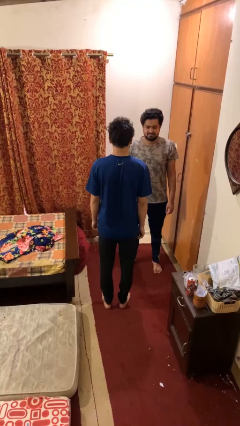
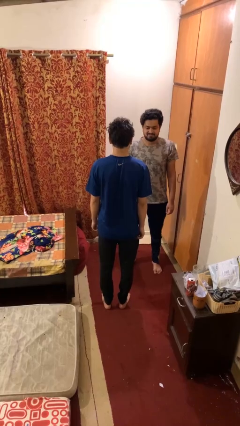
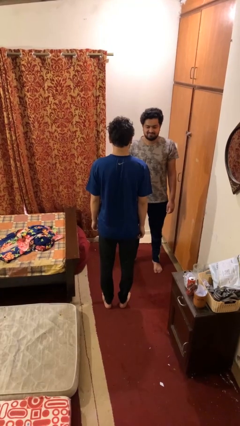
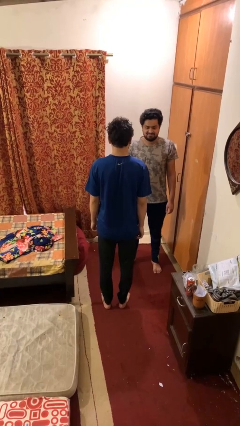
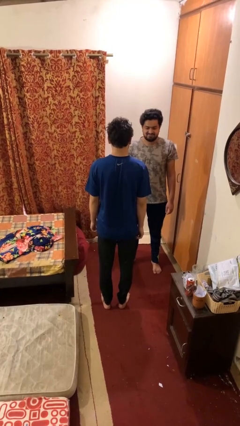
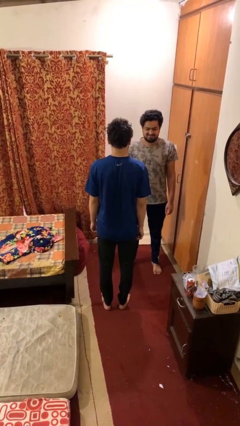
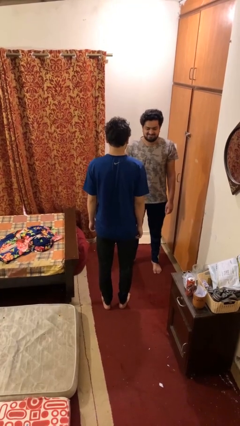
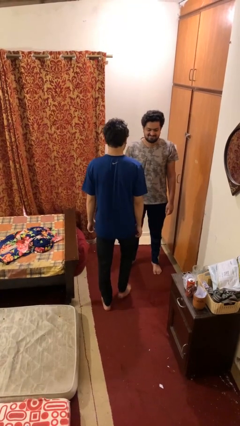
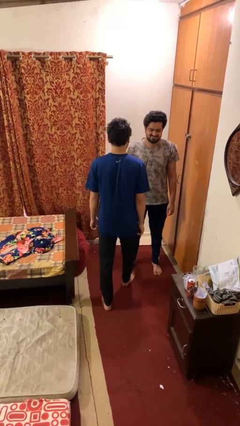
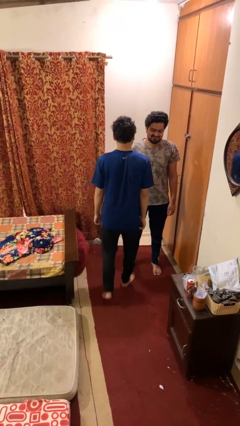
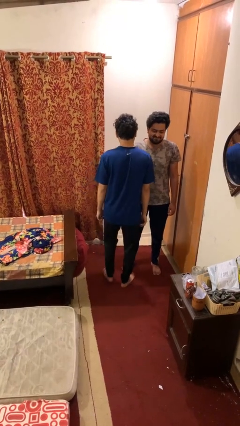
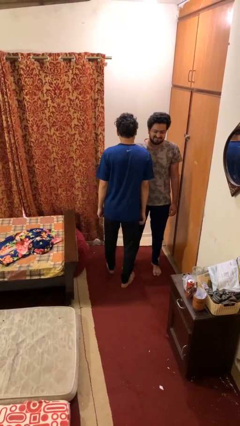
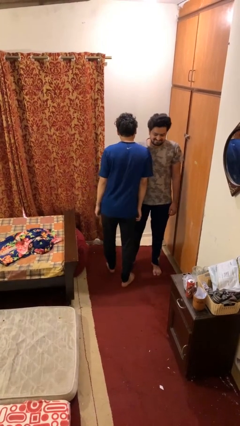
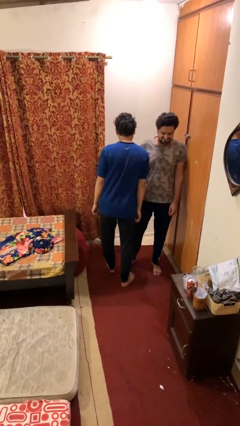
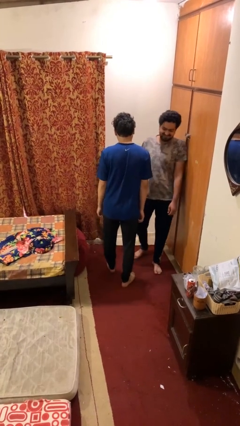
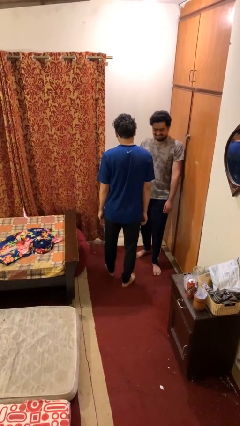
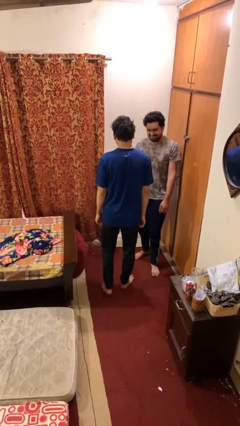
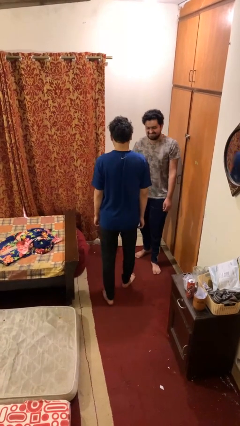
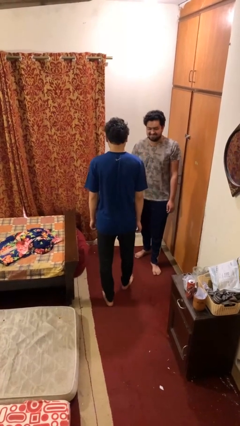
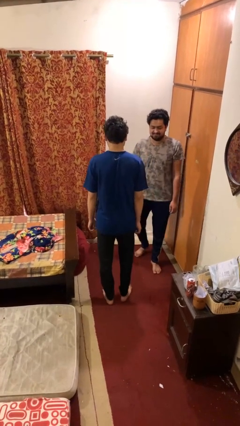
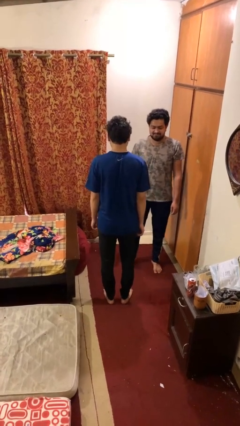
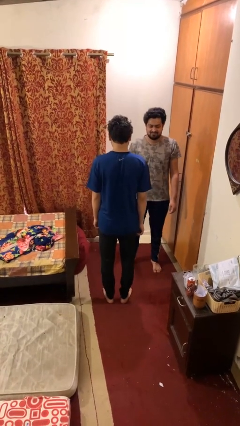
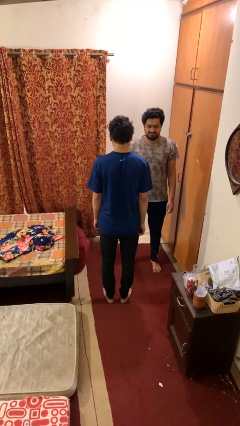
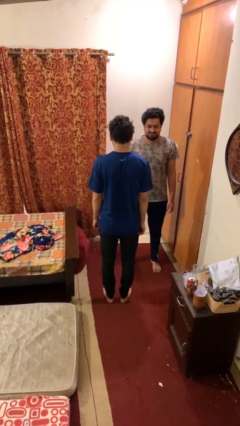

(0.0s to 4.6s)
person bumps into person

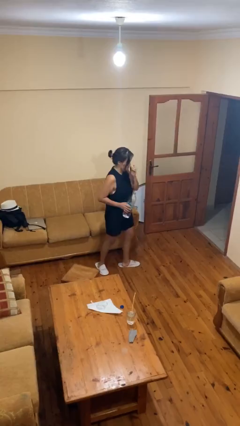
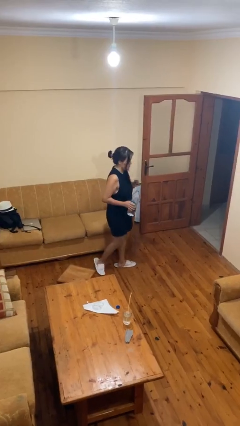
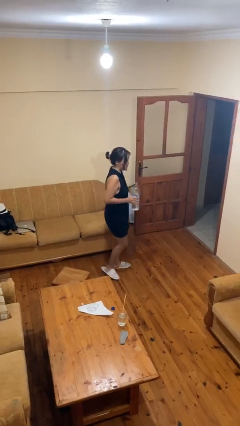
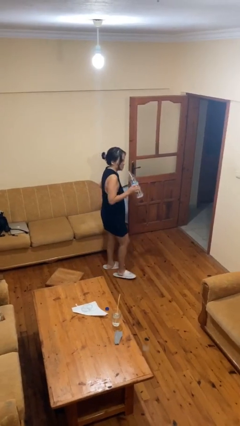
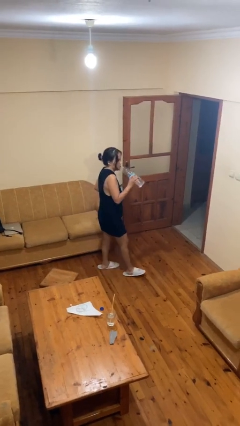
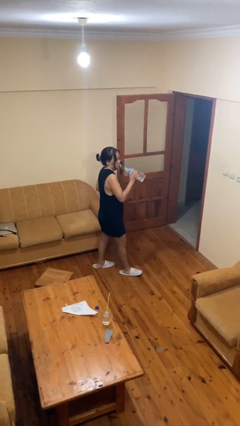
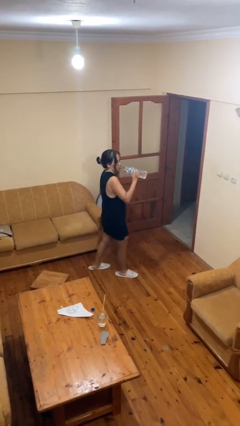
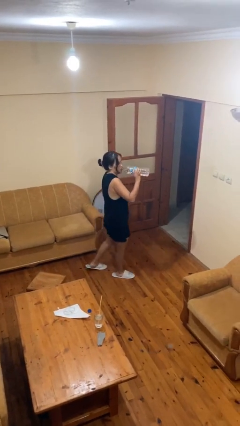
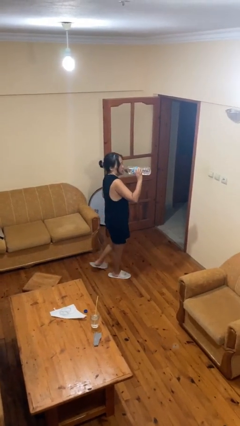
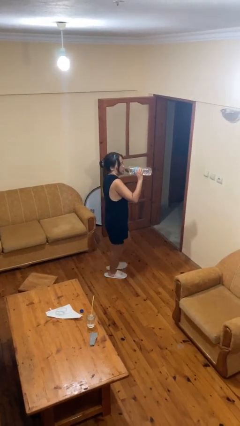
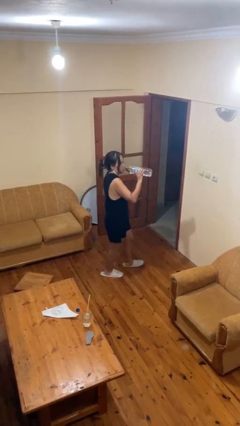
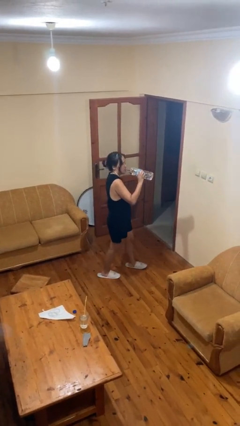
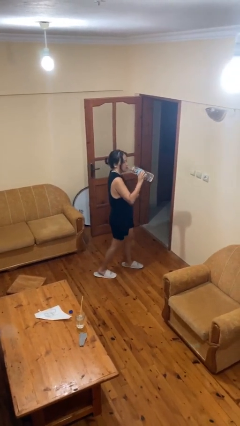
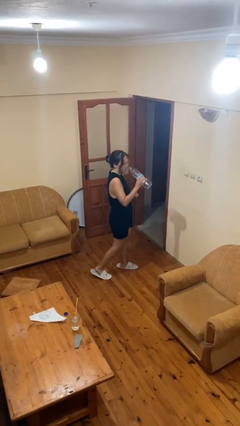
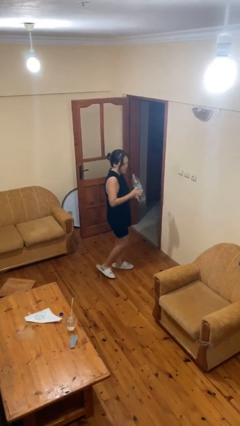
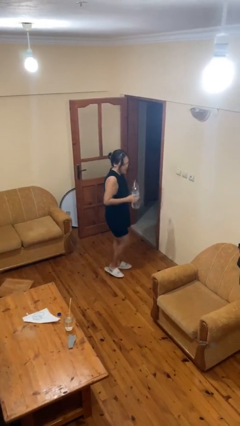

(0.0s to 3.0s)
person drinks from bottle

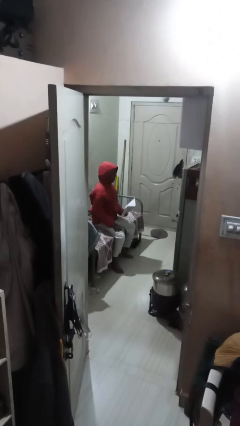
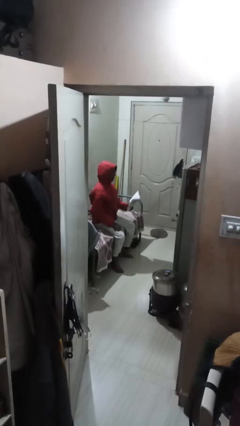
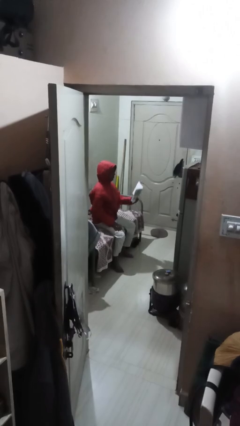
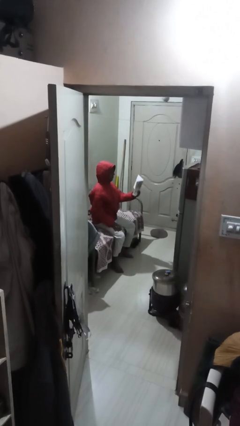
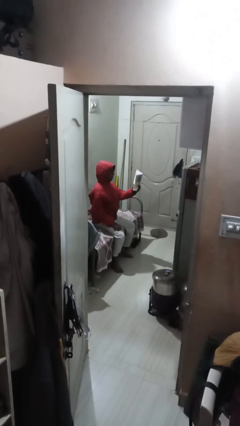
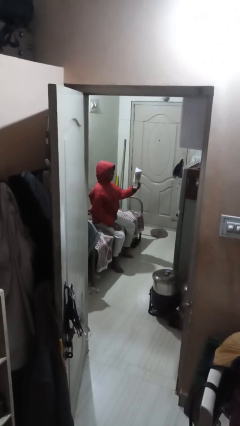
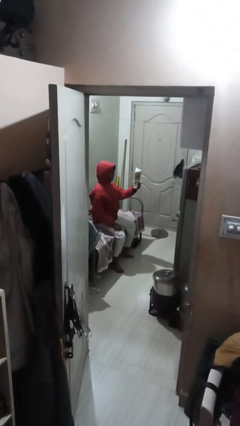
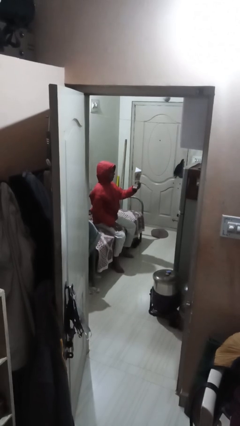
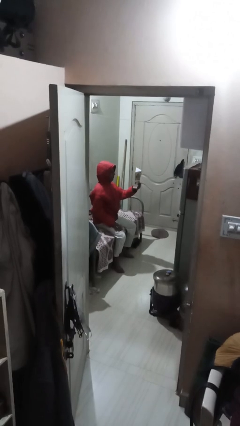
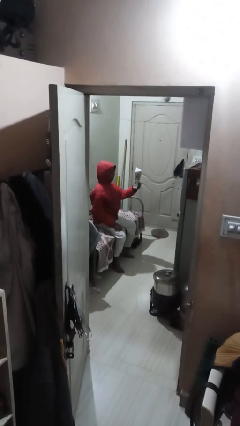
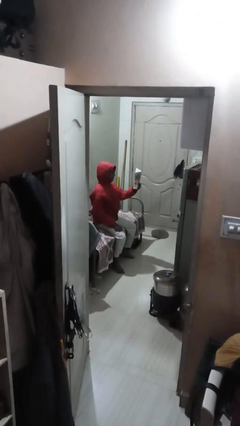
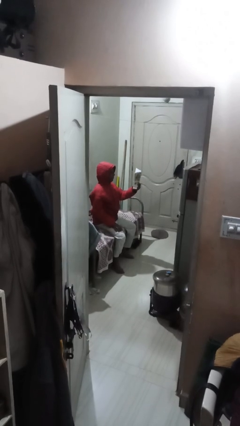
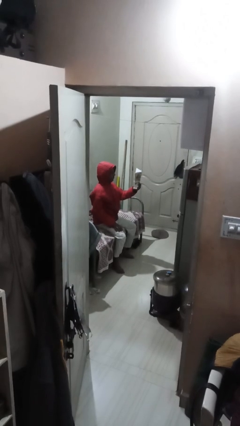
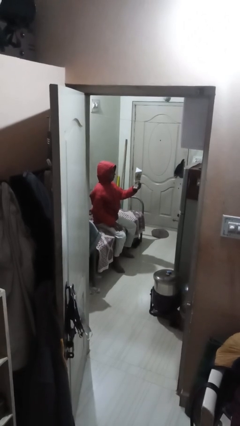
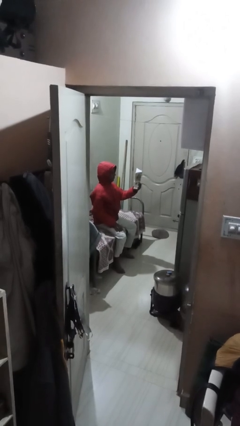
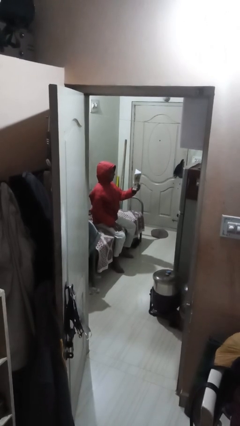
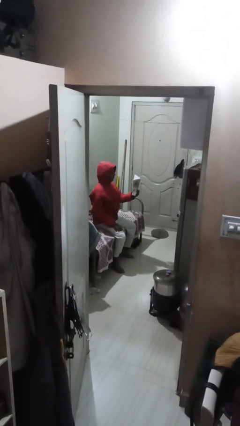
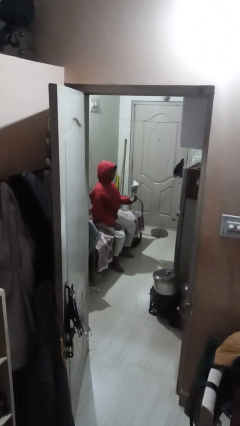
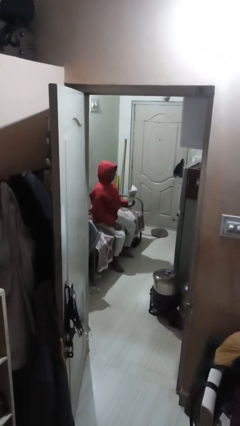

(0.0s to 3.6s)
person reads document

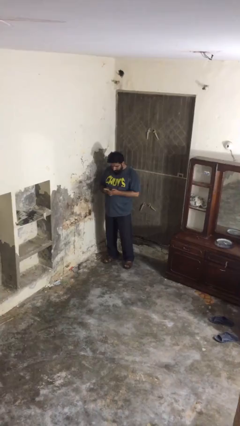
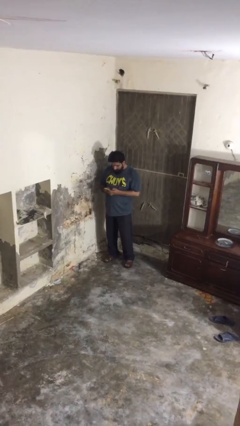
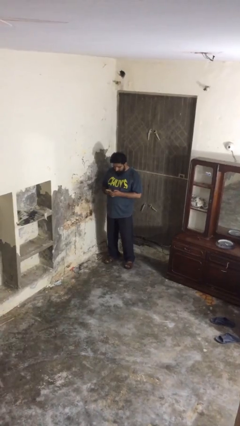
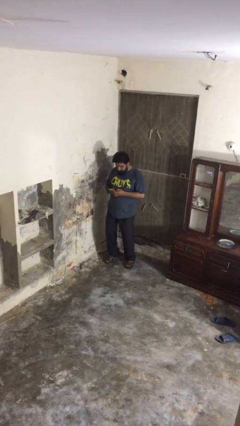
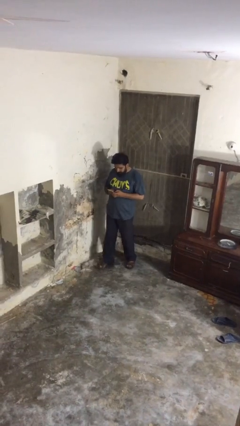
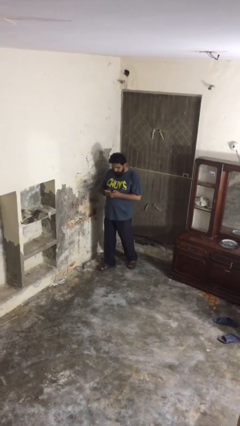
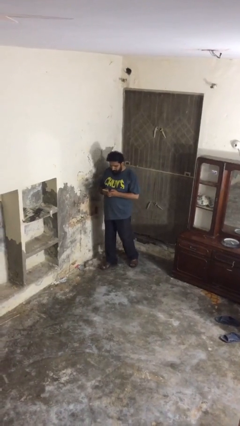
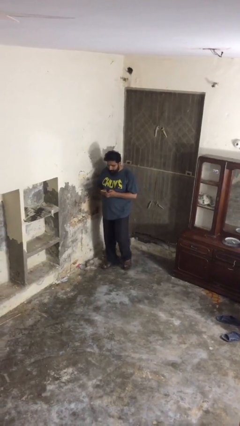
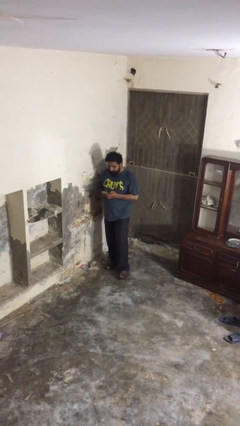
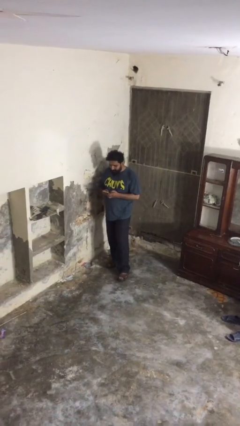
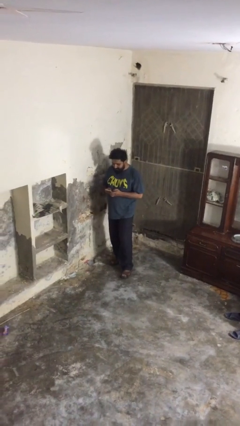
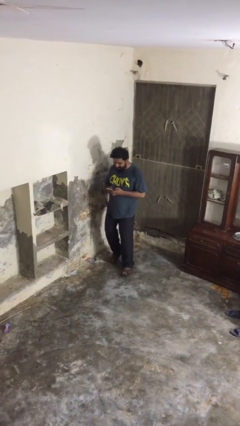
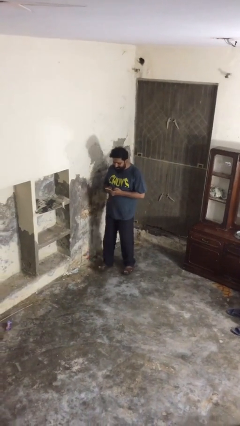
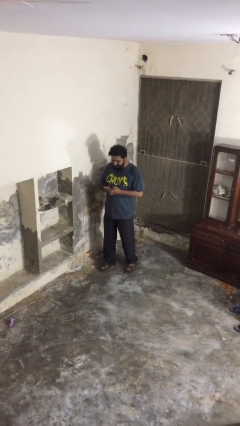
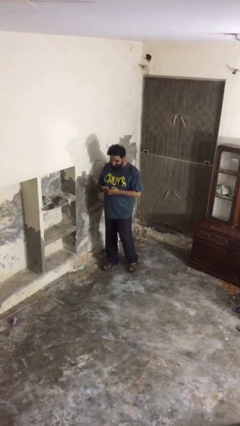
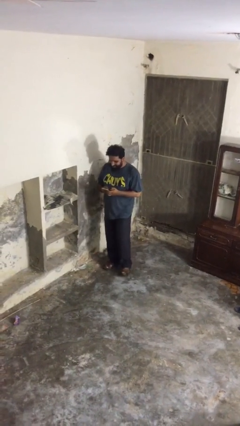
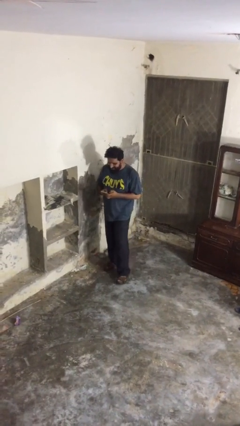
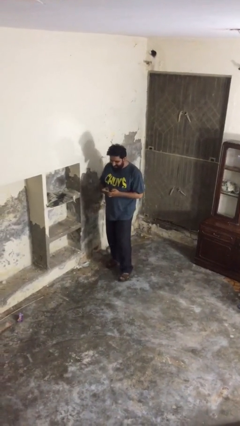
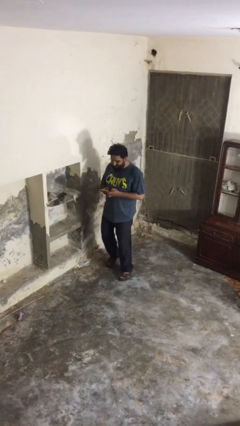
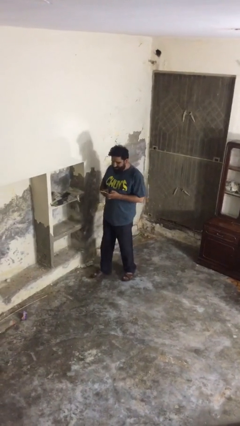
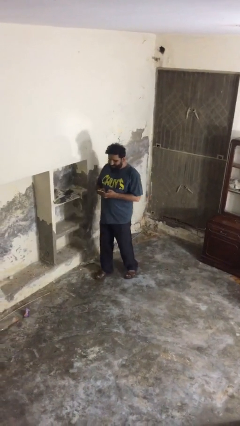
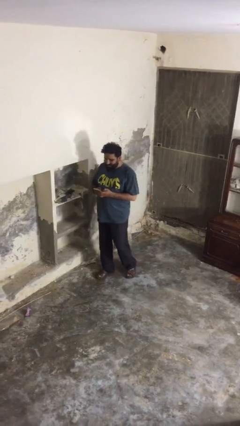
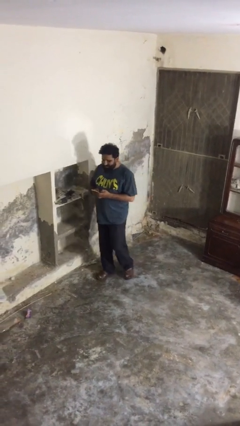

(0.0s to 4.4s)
person texts on phone

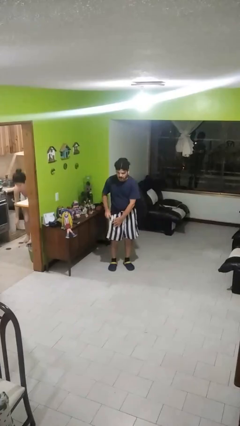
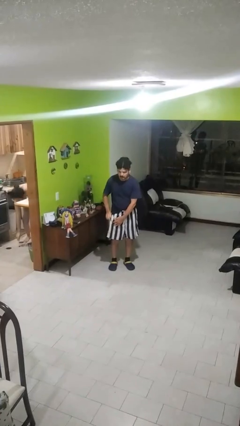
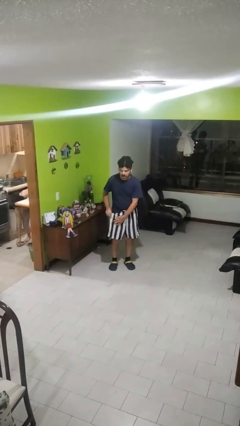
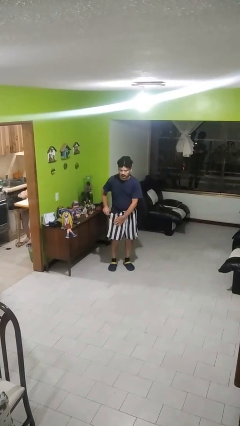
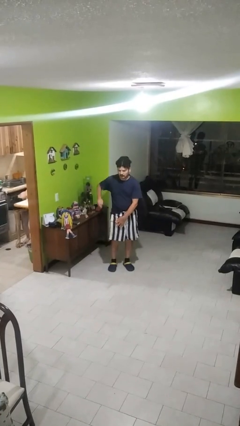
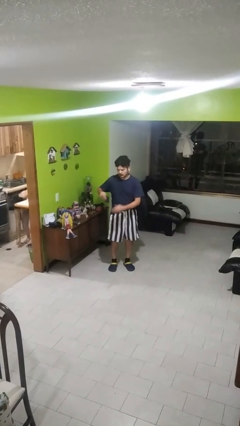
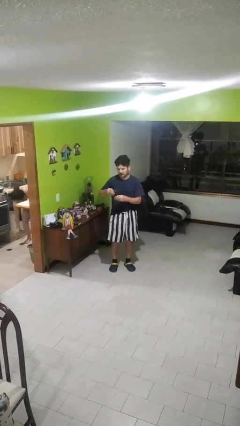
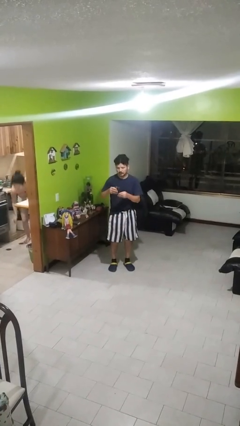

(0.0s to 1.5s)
person takes phone from pocket

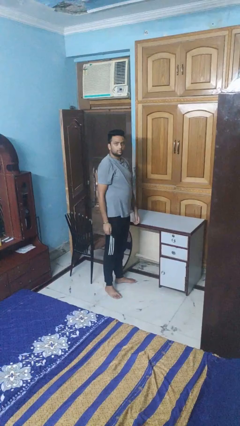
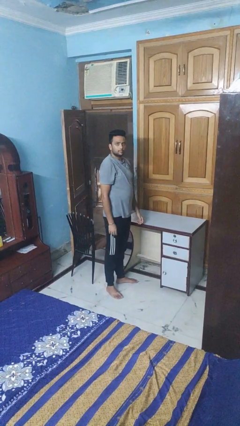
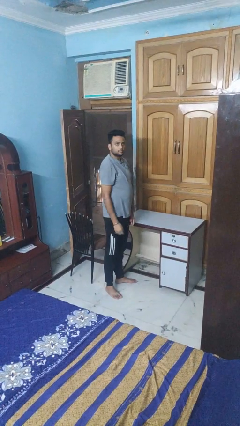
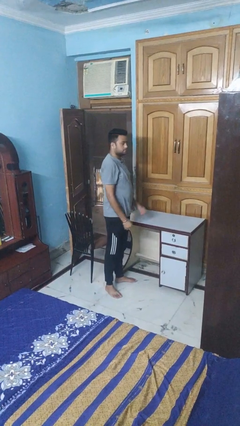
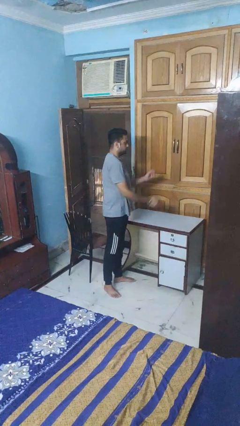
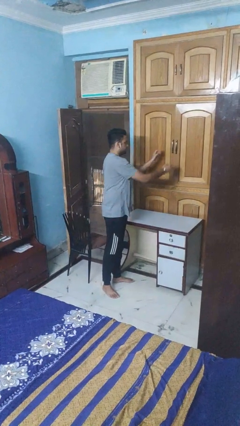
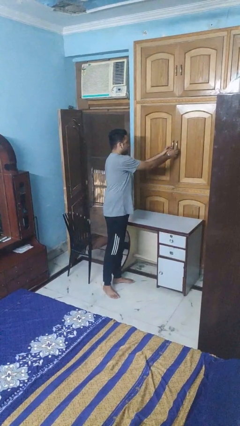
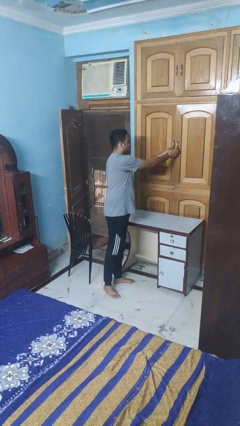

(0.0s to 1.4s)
person opens closet door
